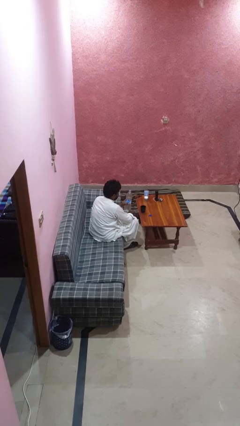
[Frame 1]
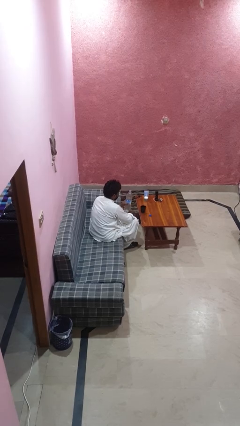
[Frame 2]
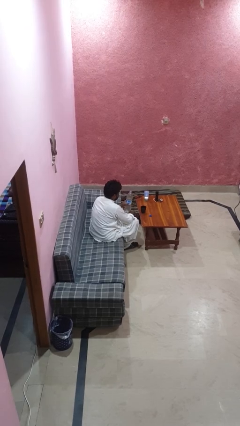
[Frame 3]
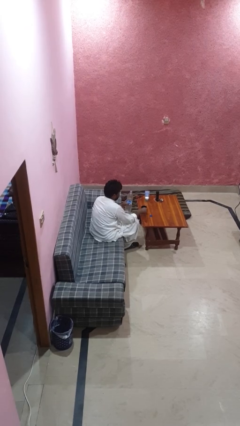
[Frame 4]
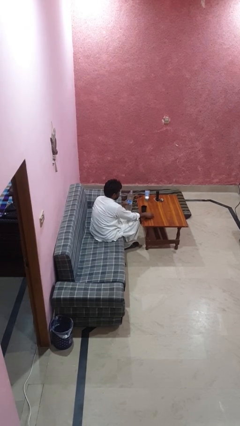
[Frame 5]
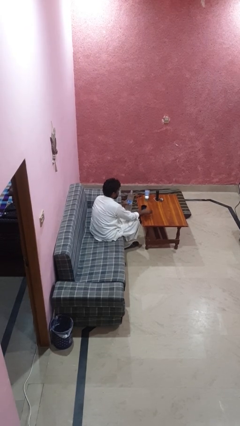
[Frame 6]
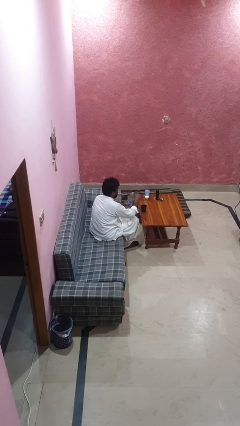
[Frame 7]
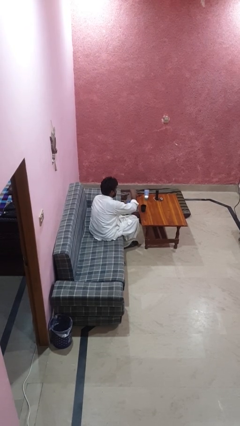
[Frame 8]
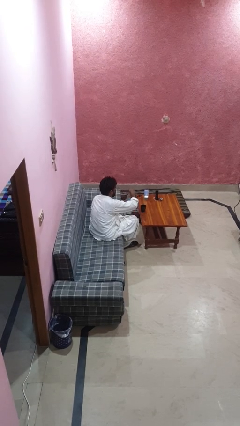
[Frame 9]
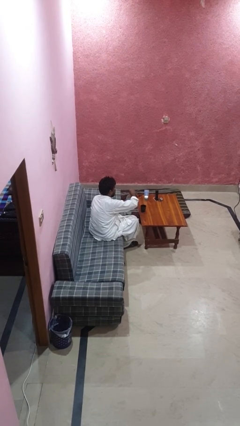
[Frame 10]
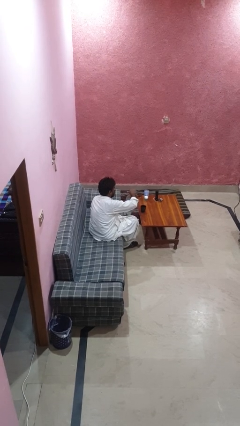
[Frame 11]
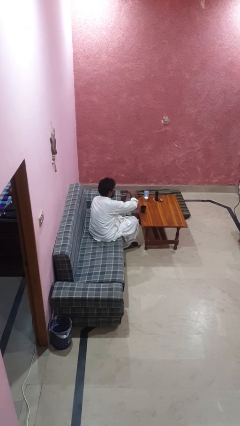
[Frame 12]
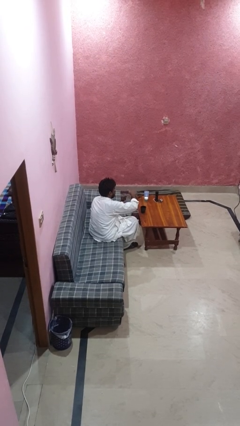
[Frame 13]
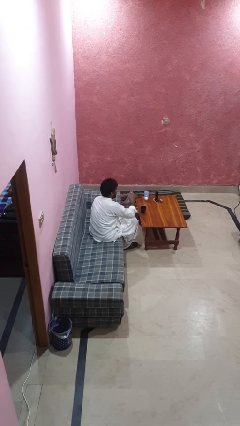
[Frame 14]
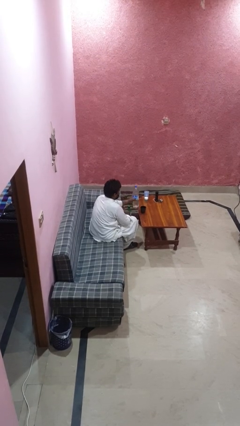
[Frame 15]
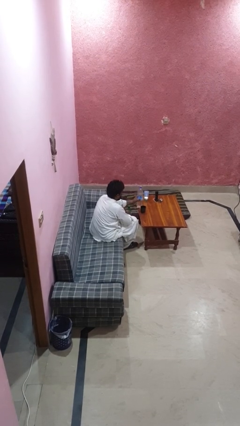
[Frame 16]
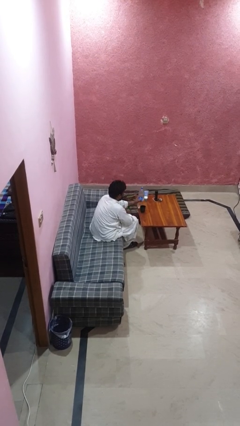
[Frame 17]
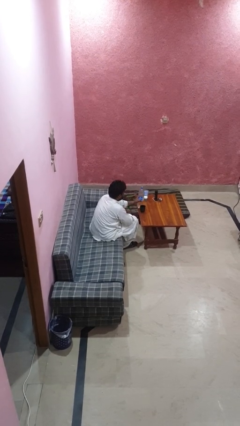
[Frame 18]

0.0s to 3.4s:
person screws lid to bottle

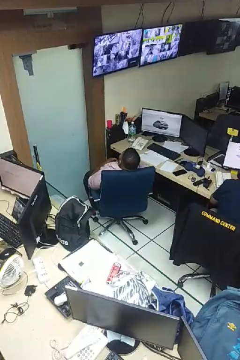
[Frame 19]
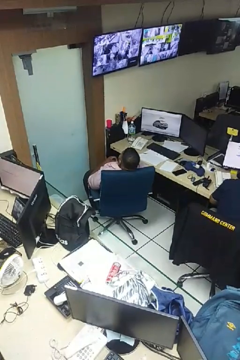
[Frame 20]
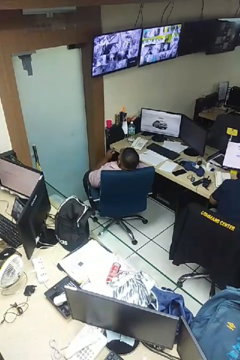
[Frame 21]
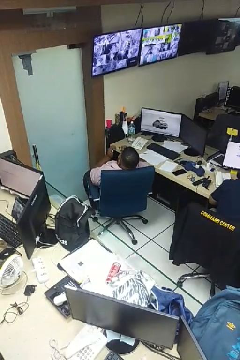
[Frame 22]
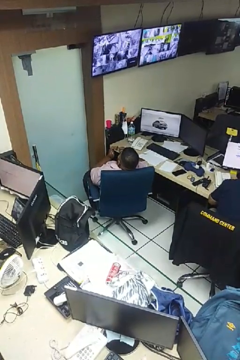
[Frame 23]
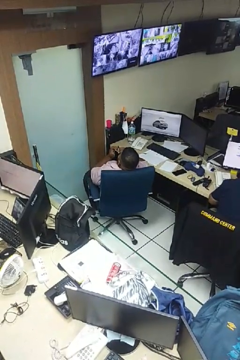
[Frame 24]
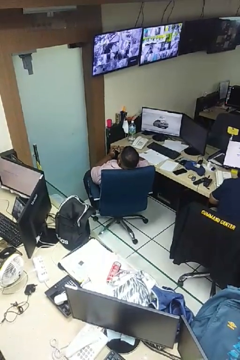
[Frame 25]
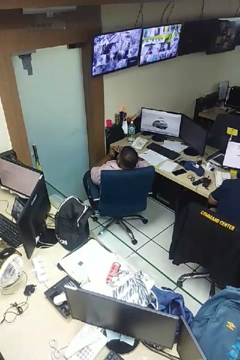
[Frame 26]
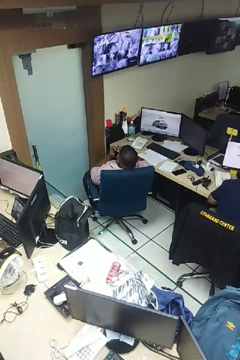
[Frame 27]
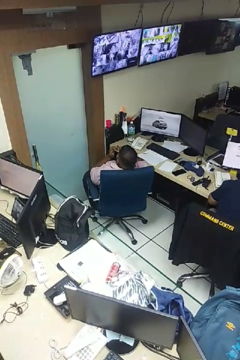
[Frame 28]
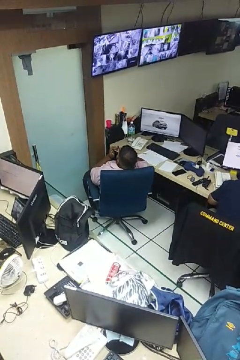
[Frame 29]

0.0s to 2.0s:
person files fingernails

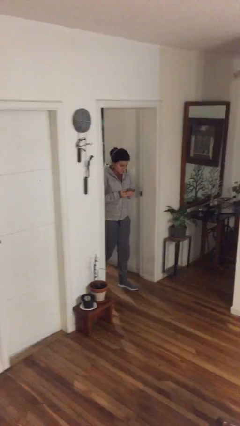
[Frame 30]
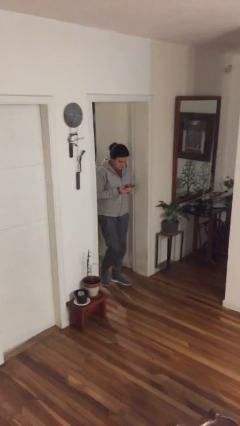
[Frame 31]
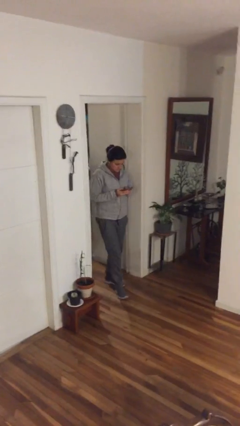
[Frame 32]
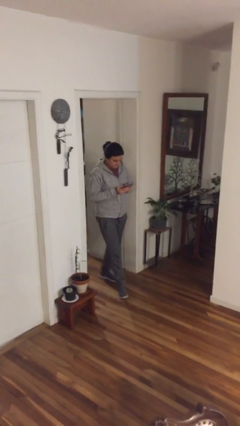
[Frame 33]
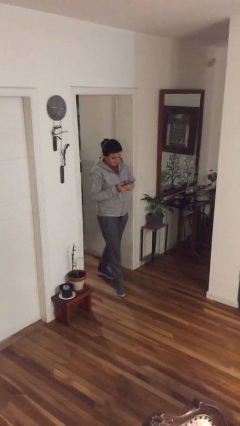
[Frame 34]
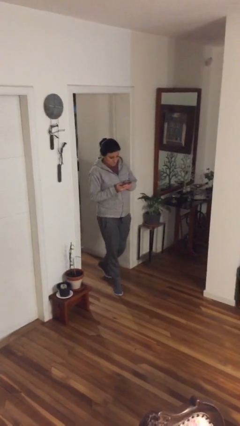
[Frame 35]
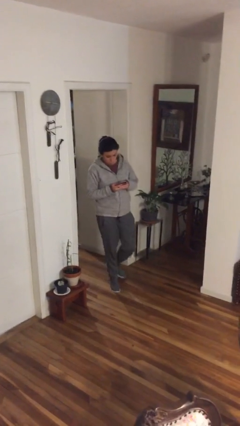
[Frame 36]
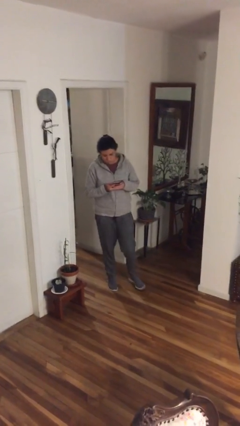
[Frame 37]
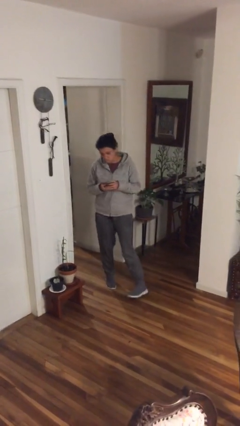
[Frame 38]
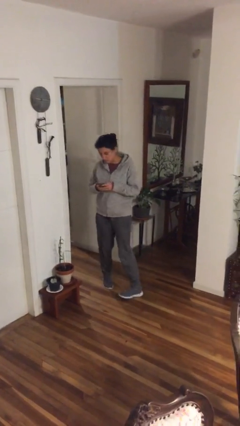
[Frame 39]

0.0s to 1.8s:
person enters scene through structure

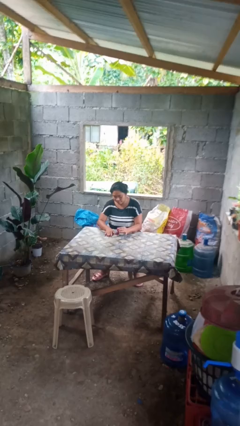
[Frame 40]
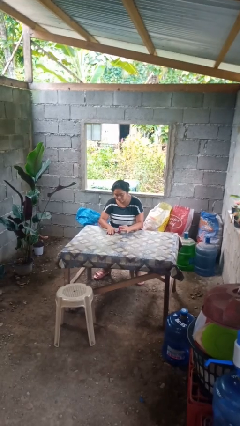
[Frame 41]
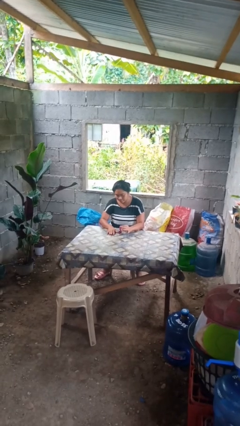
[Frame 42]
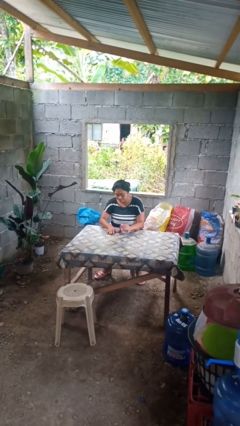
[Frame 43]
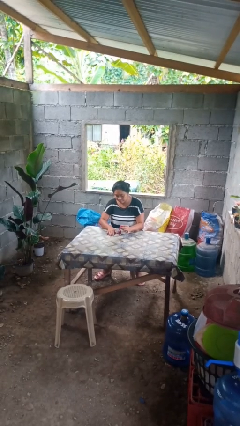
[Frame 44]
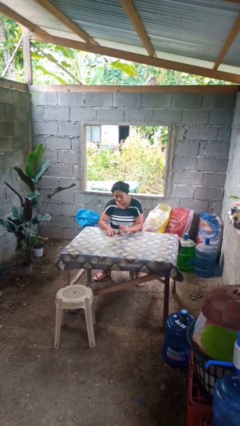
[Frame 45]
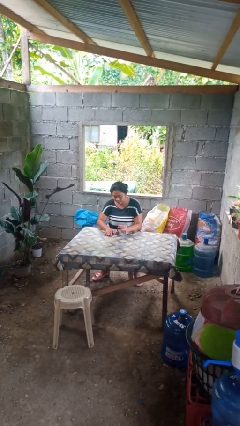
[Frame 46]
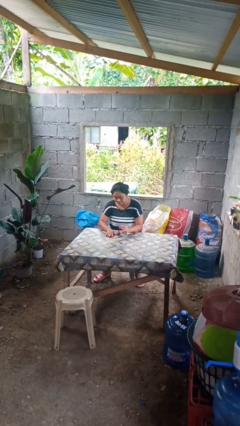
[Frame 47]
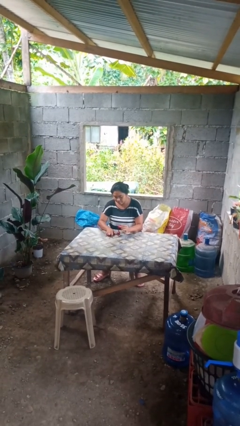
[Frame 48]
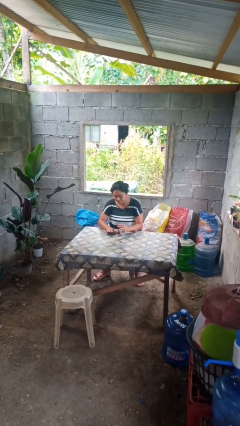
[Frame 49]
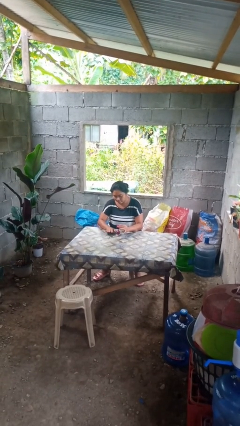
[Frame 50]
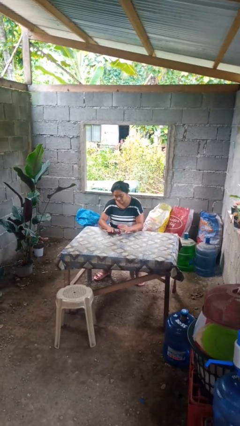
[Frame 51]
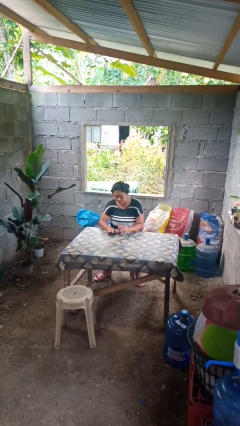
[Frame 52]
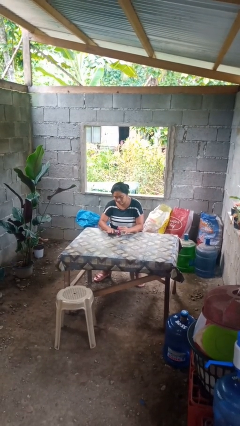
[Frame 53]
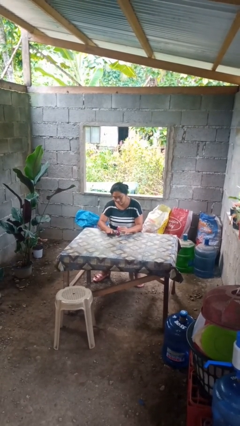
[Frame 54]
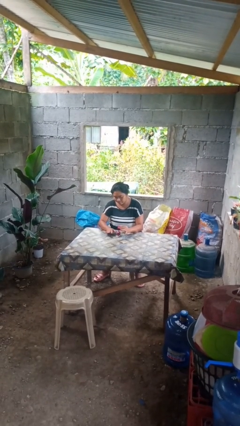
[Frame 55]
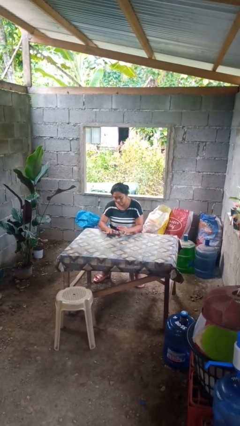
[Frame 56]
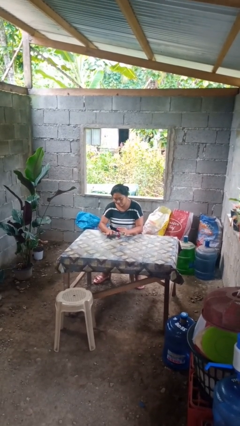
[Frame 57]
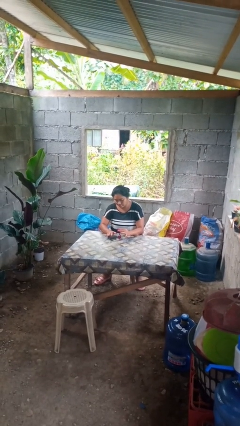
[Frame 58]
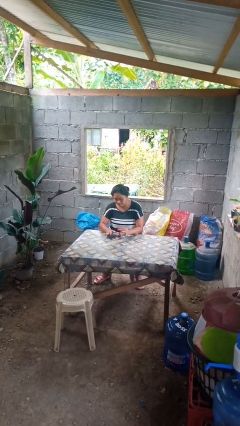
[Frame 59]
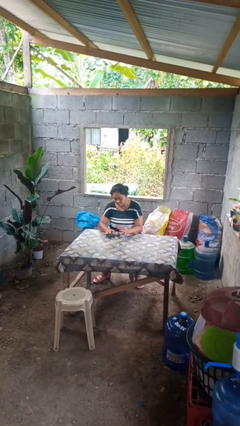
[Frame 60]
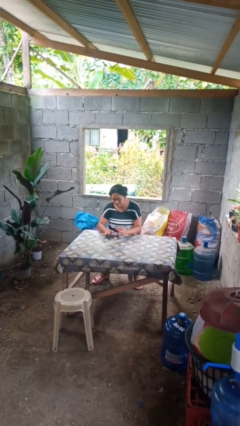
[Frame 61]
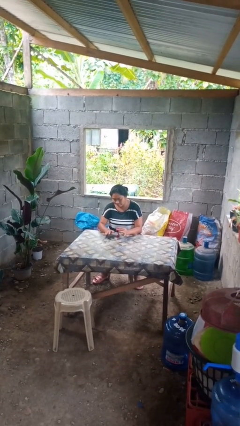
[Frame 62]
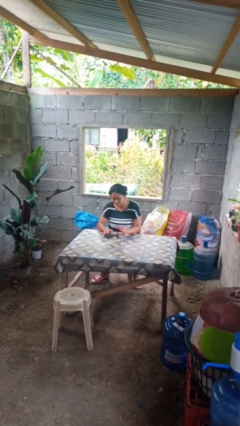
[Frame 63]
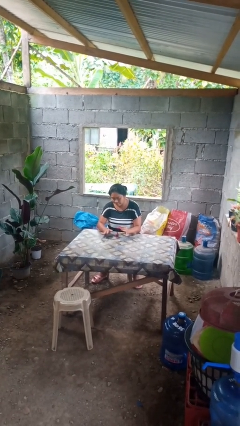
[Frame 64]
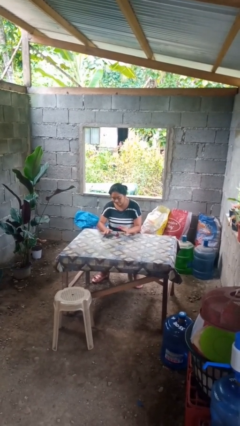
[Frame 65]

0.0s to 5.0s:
person paints fingernails

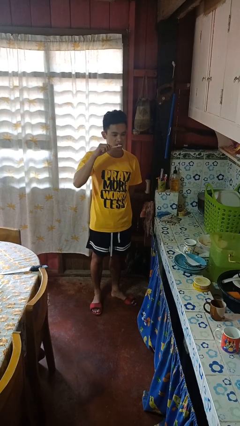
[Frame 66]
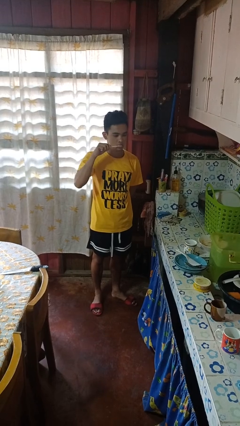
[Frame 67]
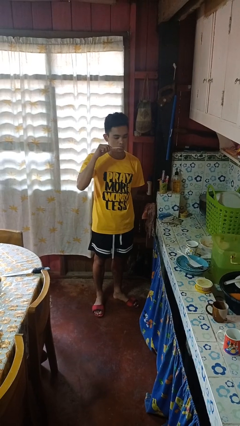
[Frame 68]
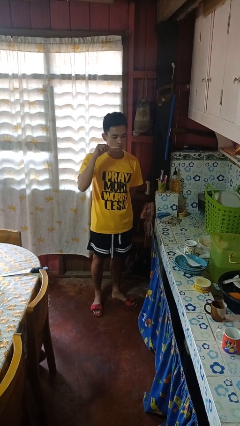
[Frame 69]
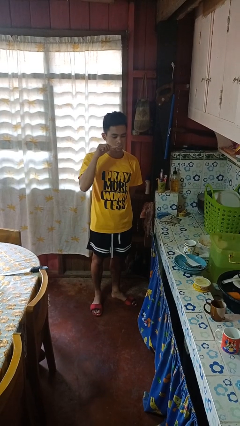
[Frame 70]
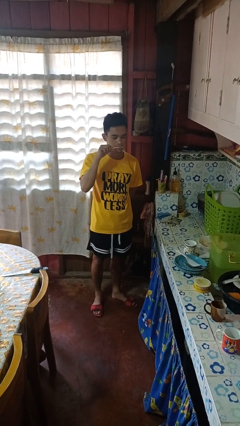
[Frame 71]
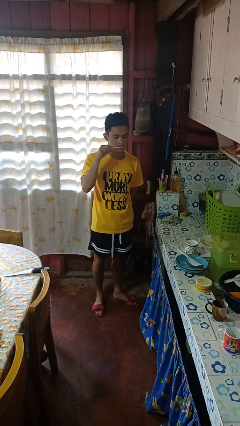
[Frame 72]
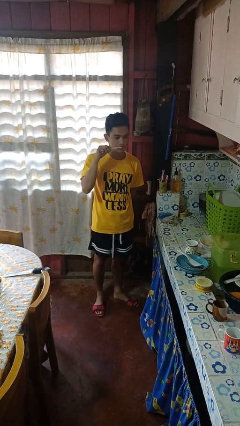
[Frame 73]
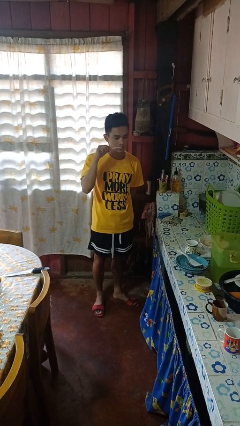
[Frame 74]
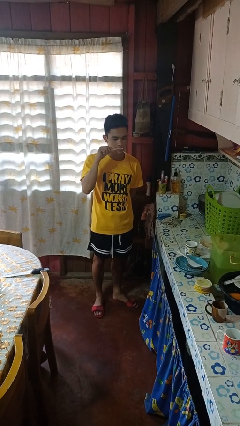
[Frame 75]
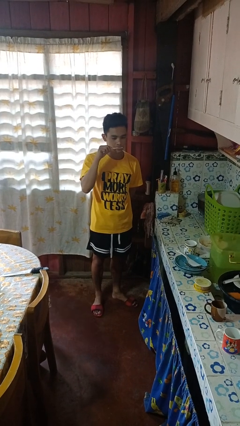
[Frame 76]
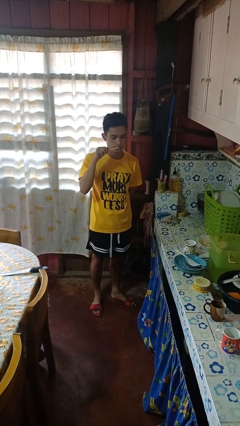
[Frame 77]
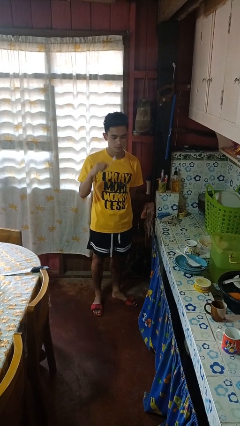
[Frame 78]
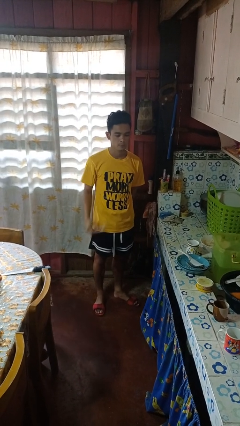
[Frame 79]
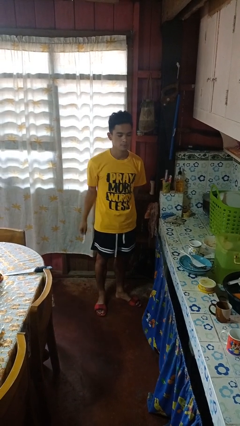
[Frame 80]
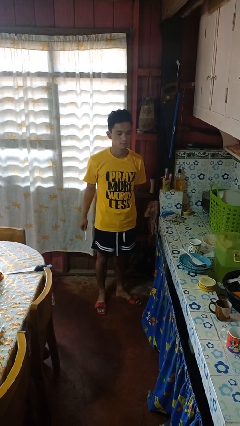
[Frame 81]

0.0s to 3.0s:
person brushes teeth

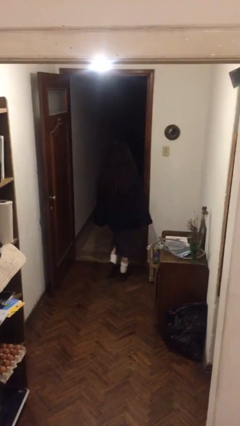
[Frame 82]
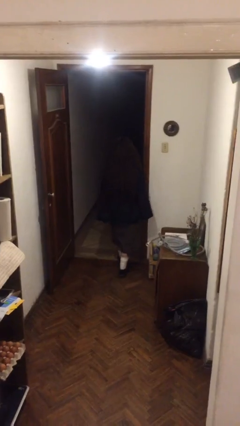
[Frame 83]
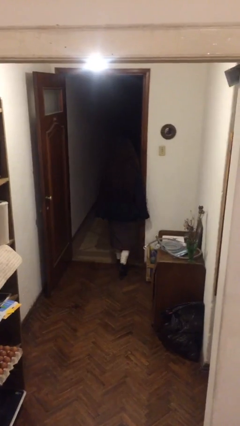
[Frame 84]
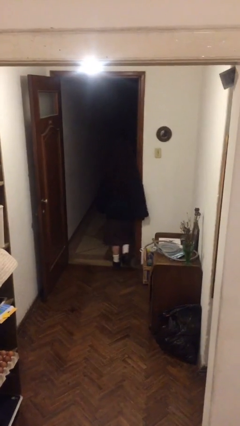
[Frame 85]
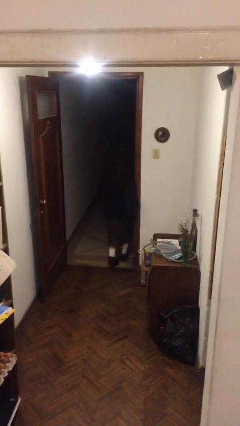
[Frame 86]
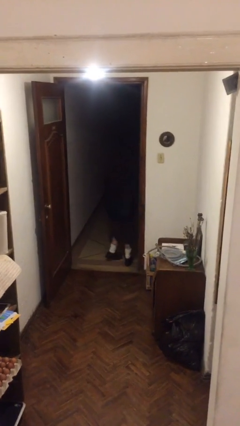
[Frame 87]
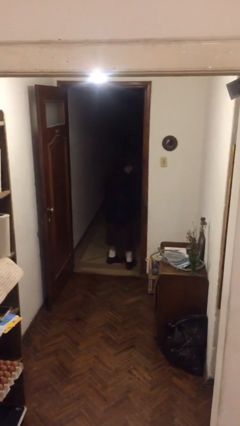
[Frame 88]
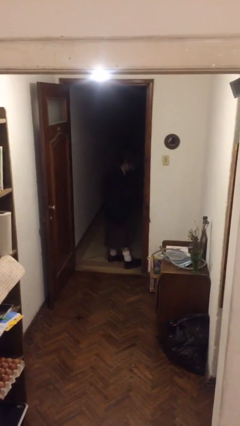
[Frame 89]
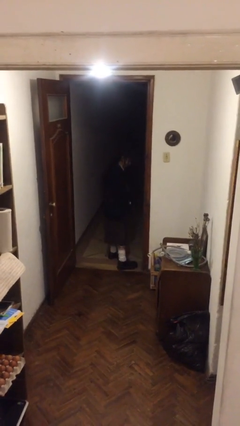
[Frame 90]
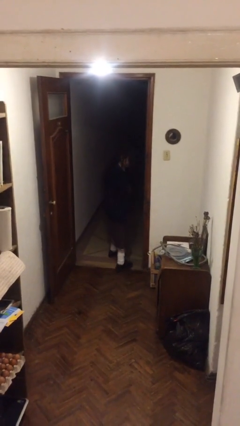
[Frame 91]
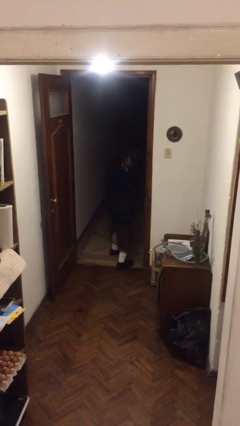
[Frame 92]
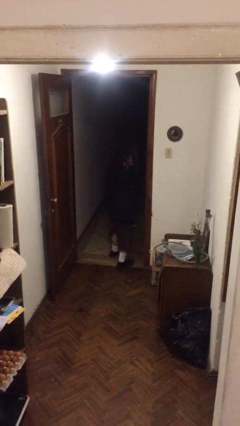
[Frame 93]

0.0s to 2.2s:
person bumps into wall

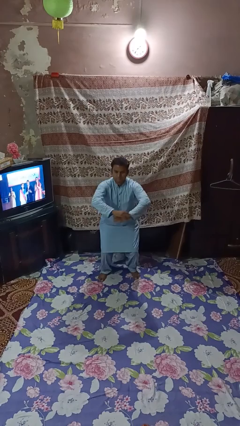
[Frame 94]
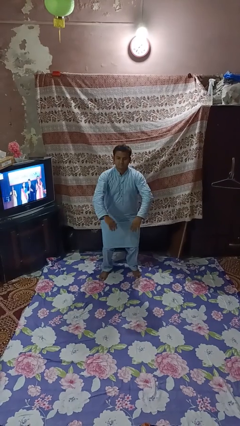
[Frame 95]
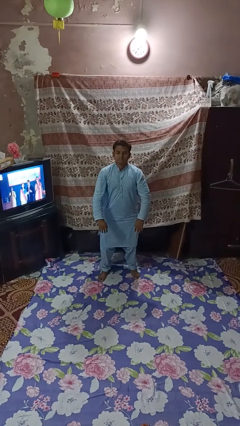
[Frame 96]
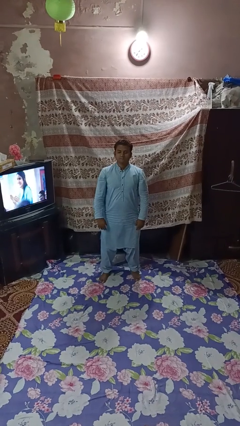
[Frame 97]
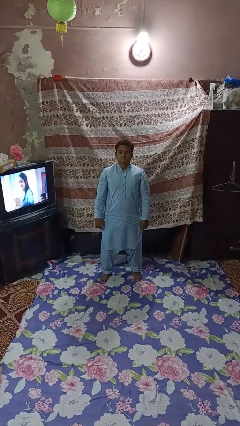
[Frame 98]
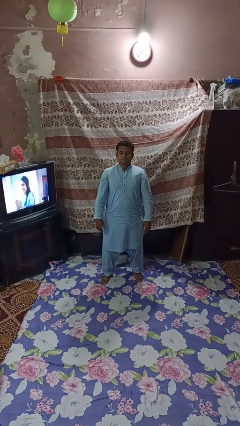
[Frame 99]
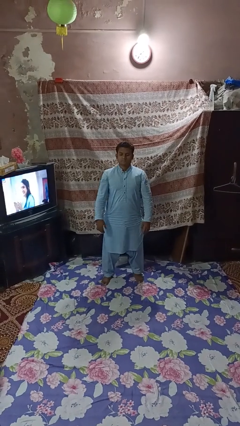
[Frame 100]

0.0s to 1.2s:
person stands up
